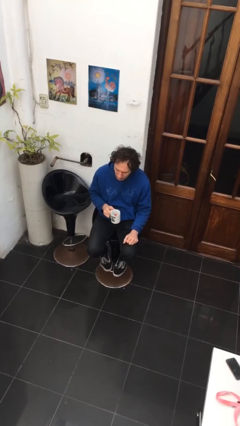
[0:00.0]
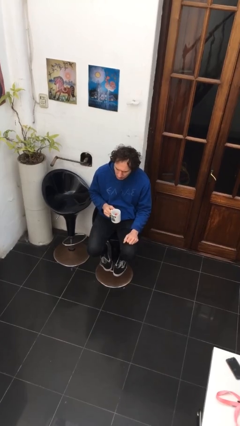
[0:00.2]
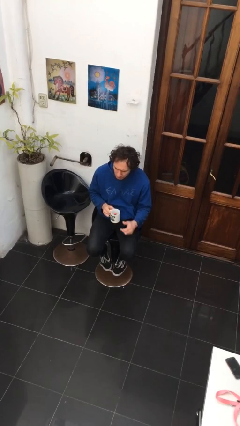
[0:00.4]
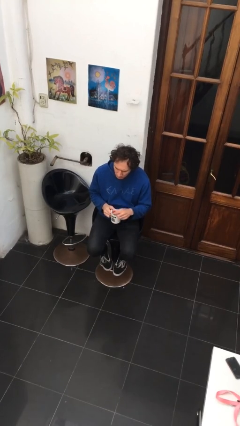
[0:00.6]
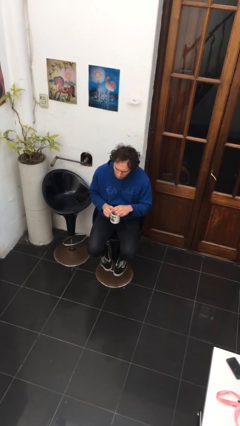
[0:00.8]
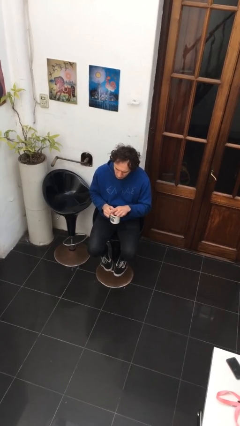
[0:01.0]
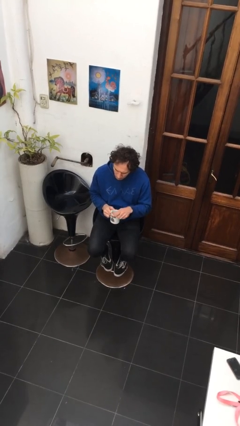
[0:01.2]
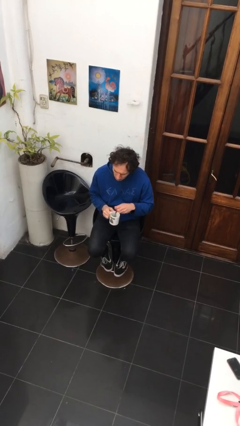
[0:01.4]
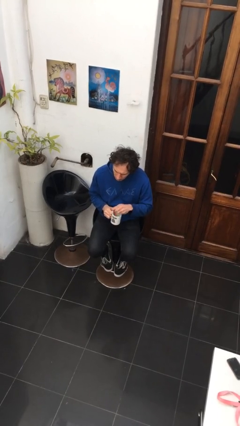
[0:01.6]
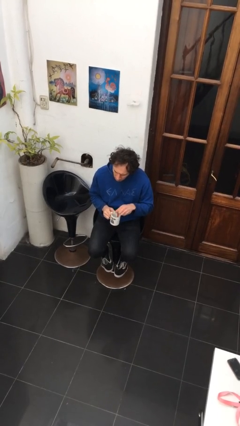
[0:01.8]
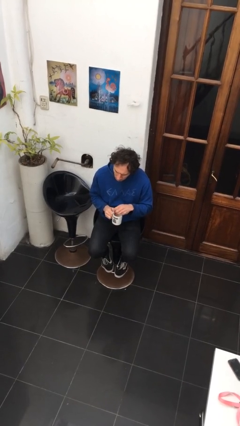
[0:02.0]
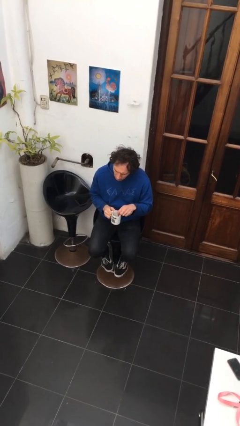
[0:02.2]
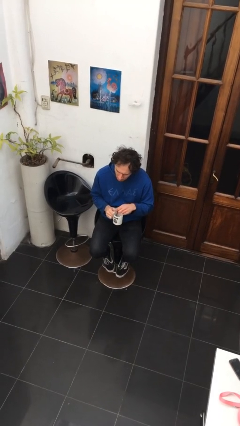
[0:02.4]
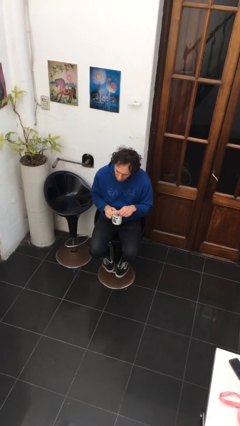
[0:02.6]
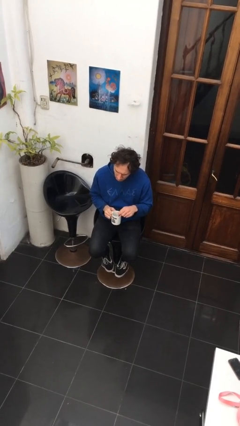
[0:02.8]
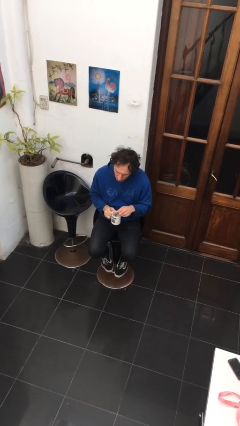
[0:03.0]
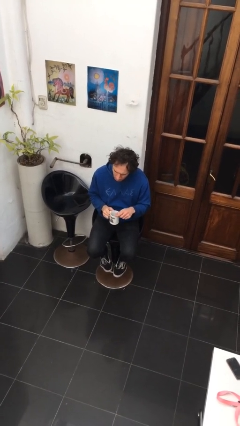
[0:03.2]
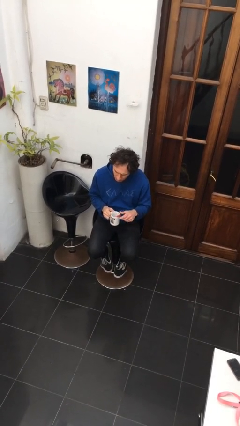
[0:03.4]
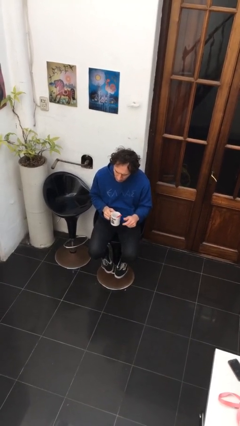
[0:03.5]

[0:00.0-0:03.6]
person stirs mug

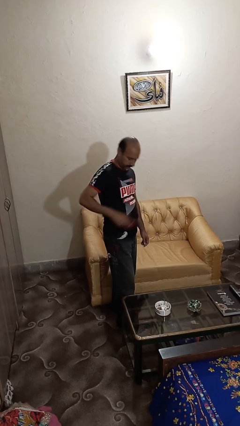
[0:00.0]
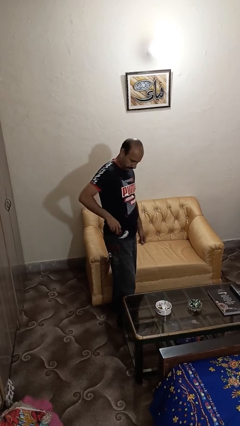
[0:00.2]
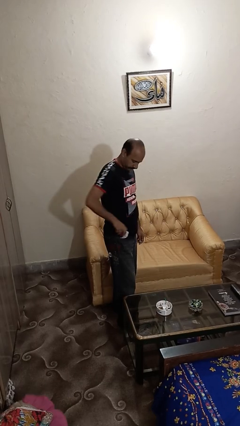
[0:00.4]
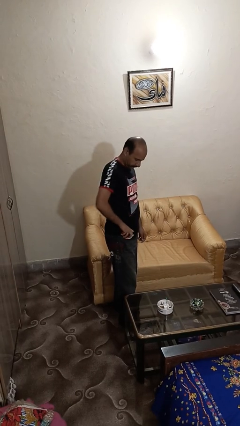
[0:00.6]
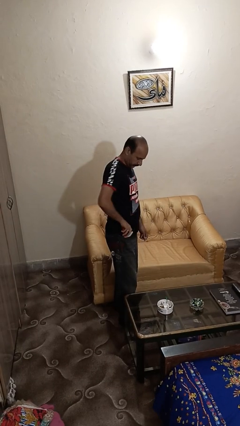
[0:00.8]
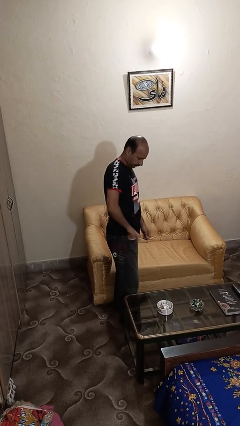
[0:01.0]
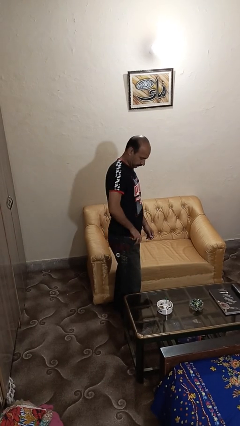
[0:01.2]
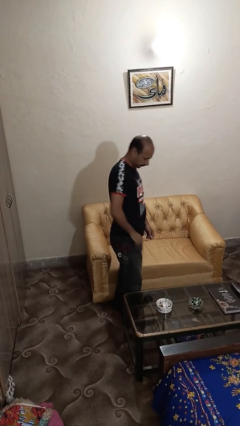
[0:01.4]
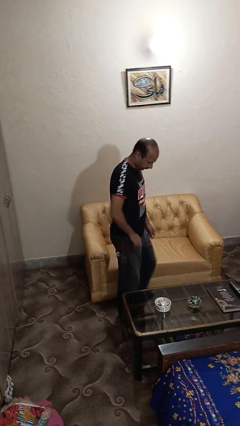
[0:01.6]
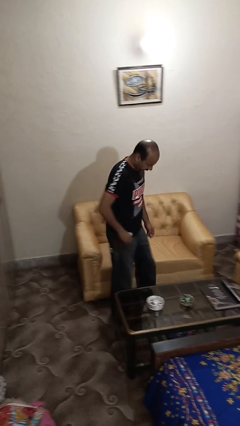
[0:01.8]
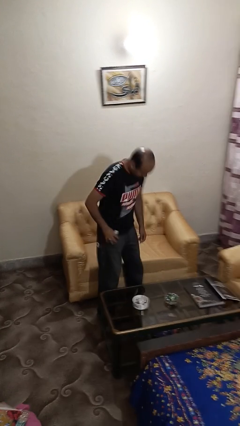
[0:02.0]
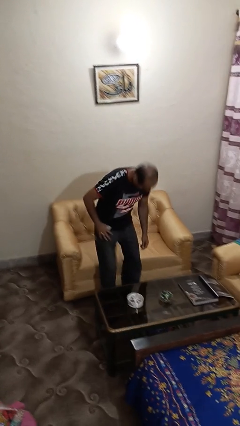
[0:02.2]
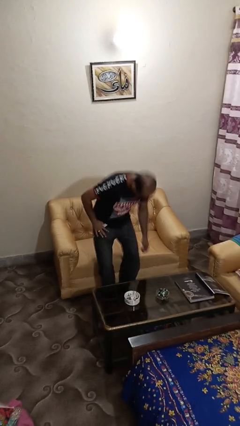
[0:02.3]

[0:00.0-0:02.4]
person puts phone into pocket

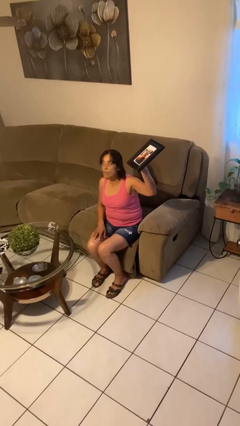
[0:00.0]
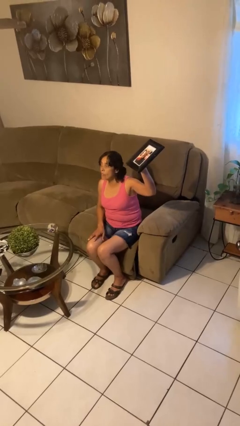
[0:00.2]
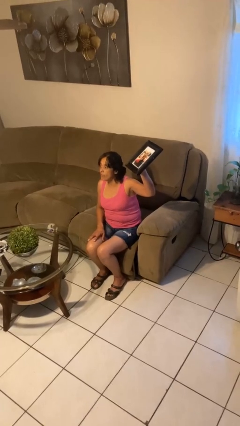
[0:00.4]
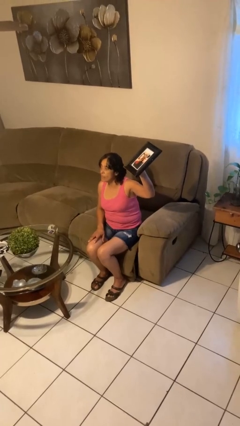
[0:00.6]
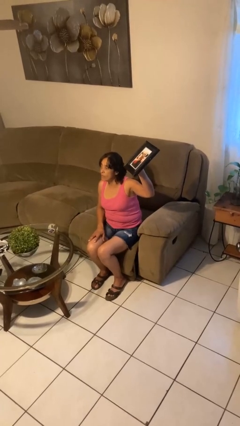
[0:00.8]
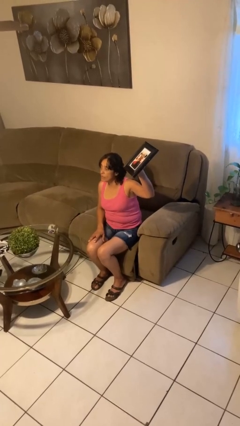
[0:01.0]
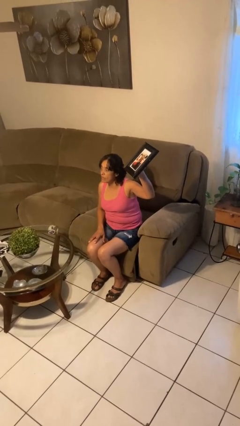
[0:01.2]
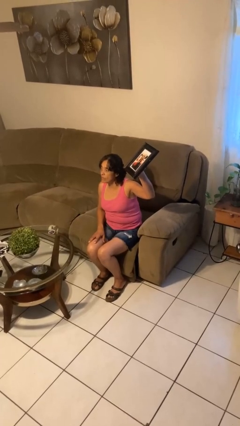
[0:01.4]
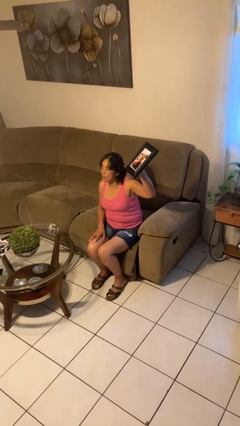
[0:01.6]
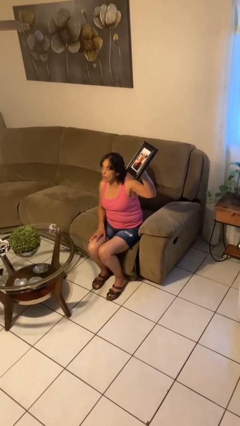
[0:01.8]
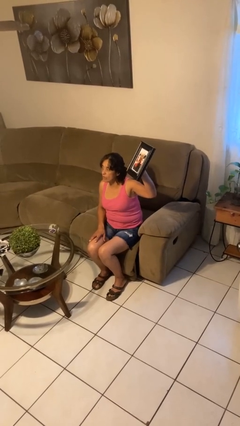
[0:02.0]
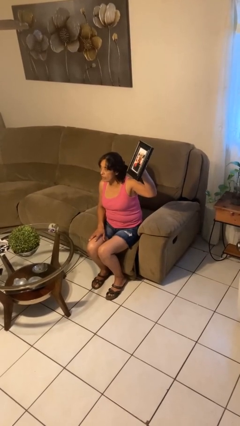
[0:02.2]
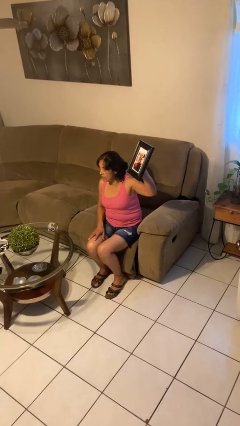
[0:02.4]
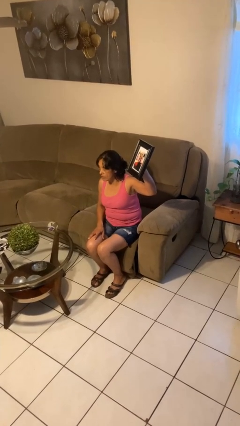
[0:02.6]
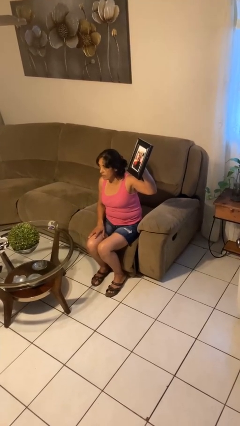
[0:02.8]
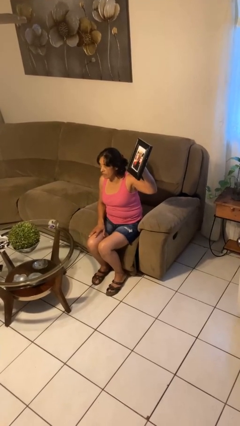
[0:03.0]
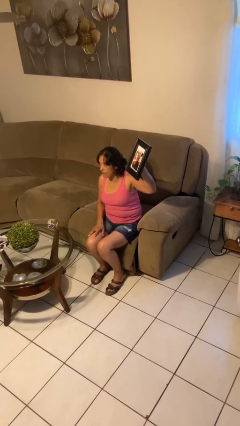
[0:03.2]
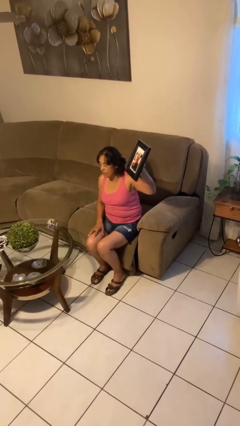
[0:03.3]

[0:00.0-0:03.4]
person holds object above head

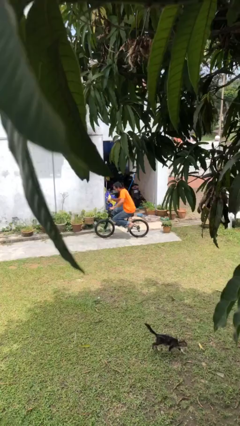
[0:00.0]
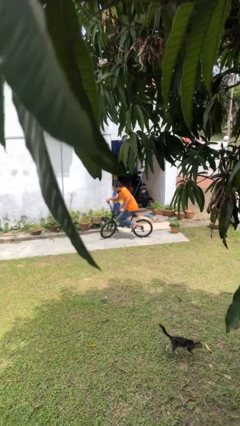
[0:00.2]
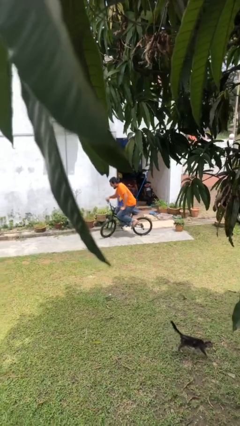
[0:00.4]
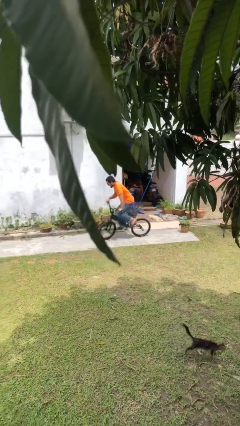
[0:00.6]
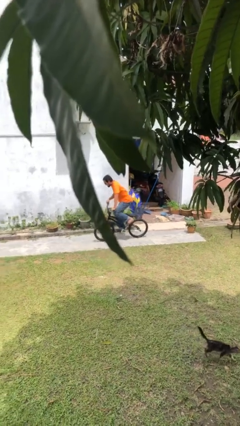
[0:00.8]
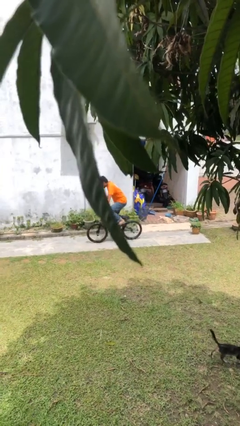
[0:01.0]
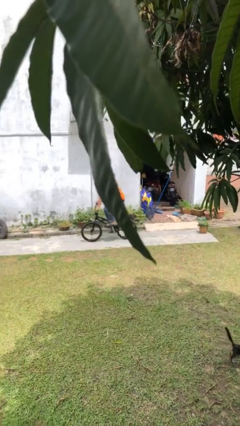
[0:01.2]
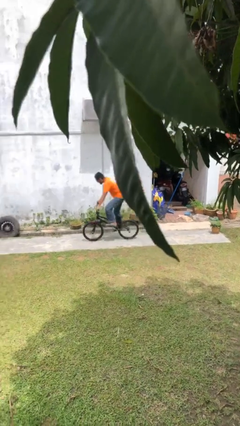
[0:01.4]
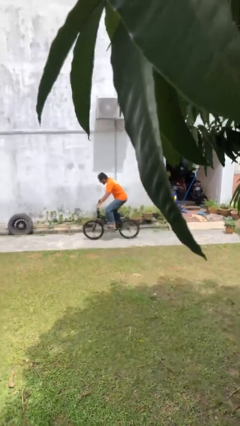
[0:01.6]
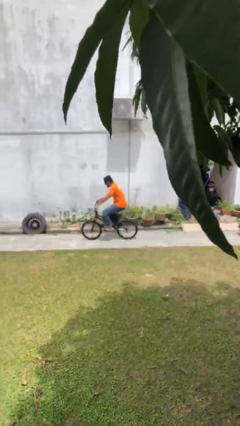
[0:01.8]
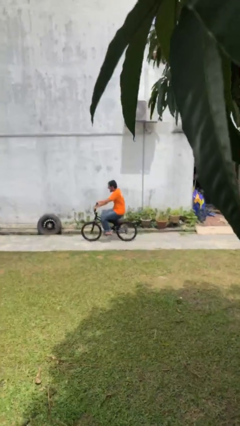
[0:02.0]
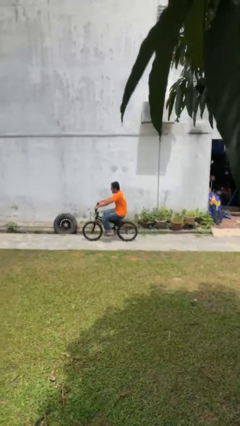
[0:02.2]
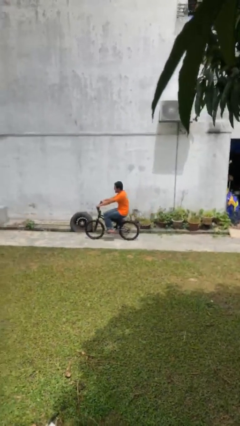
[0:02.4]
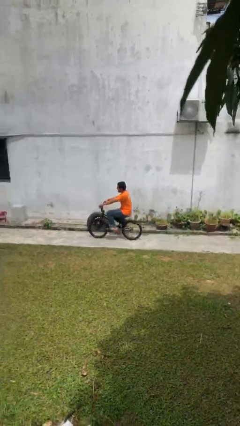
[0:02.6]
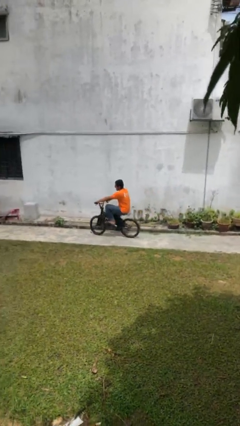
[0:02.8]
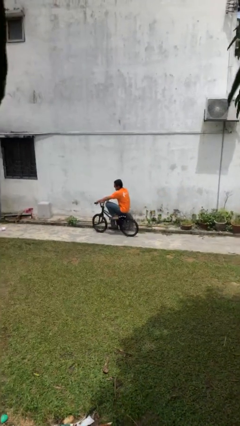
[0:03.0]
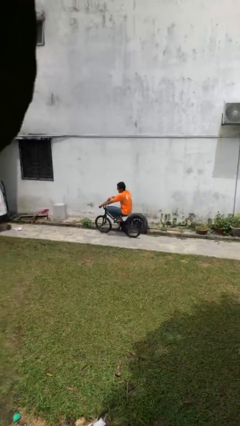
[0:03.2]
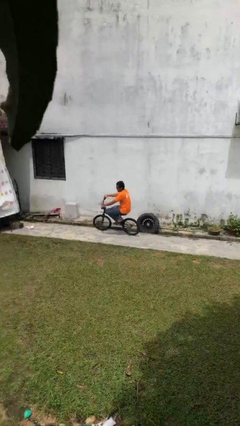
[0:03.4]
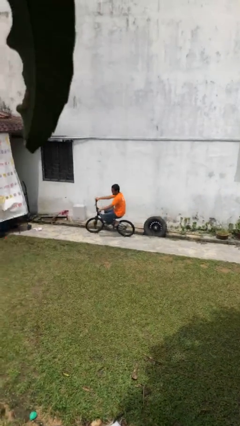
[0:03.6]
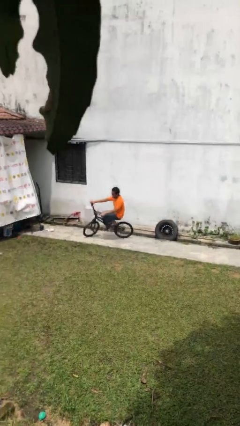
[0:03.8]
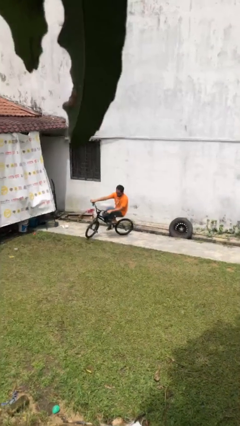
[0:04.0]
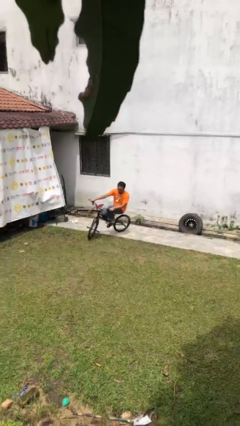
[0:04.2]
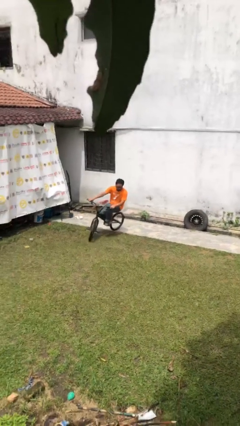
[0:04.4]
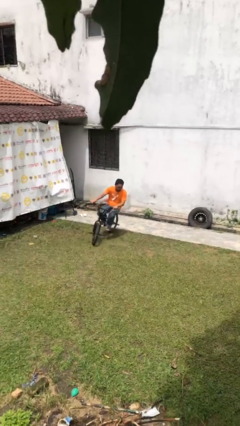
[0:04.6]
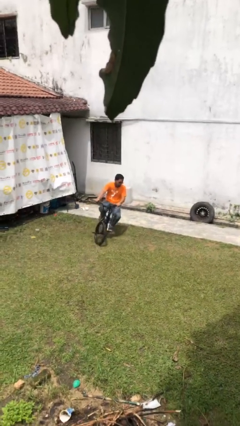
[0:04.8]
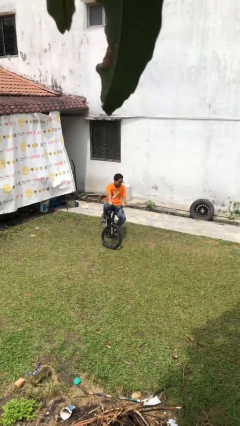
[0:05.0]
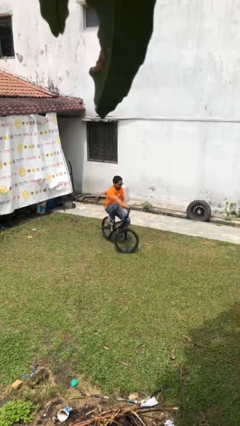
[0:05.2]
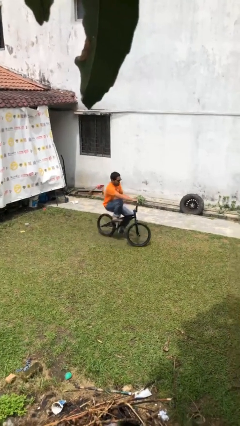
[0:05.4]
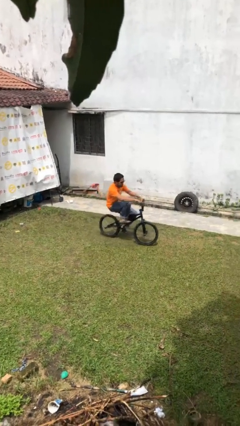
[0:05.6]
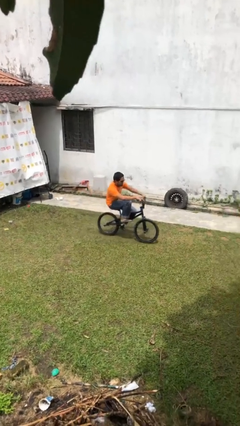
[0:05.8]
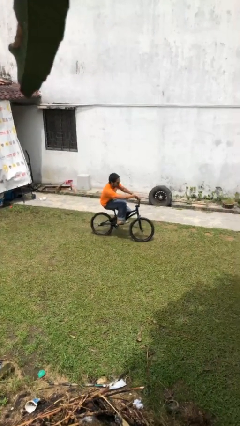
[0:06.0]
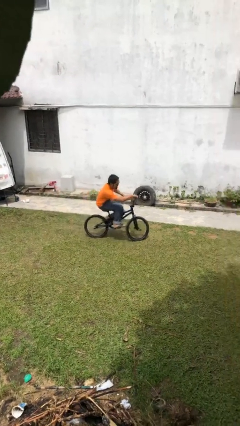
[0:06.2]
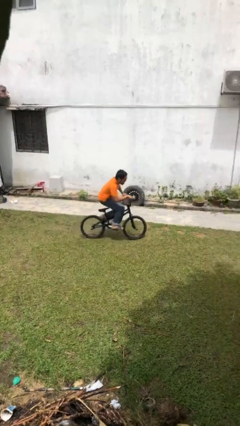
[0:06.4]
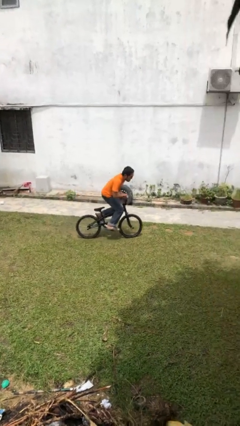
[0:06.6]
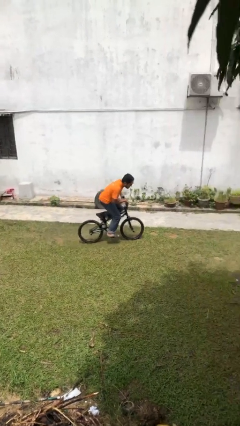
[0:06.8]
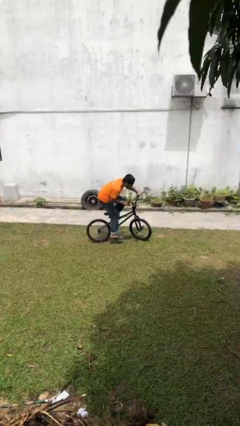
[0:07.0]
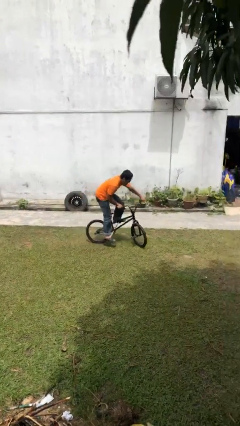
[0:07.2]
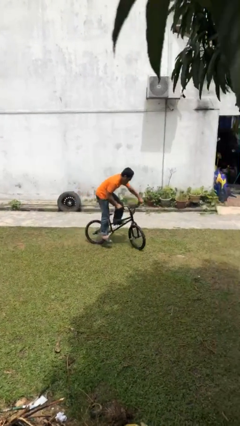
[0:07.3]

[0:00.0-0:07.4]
person rides bicycle

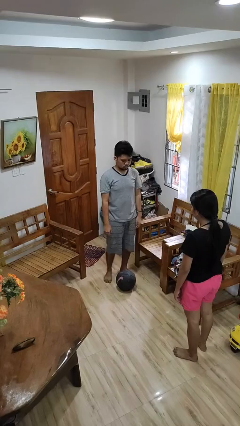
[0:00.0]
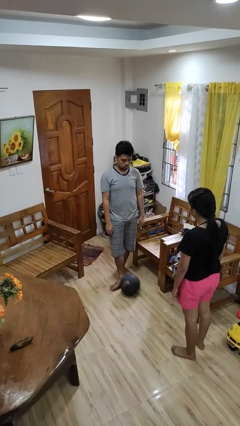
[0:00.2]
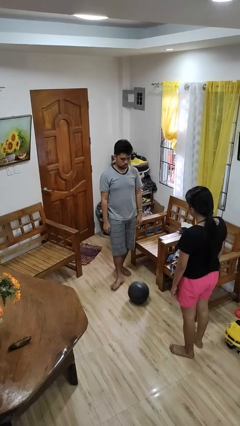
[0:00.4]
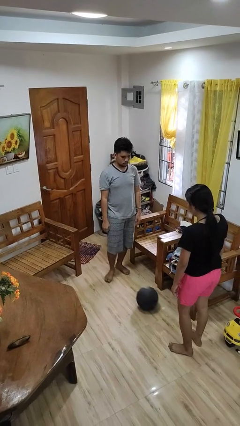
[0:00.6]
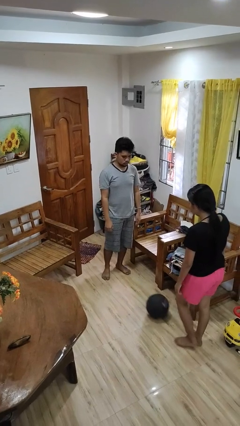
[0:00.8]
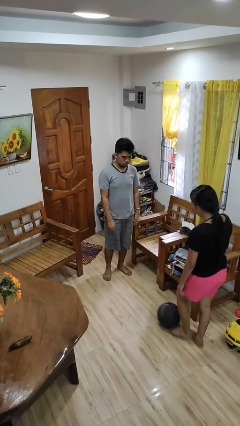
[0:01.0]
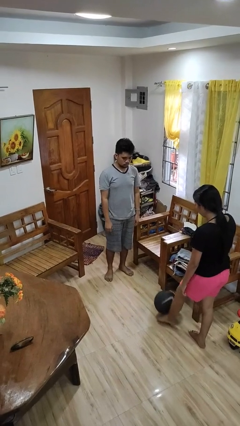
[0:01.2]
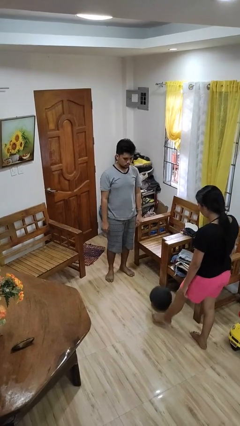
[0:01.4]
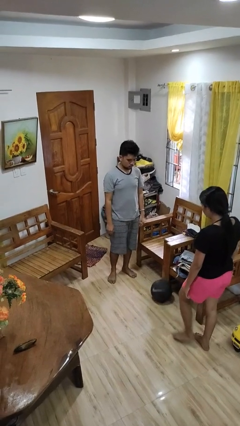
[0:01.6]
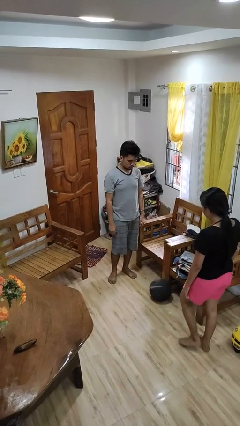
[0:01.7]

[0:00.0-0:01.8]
person kicks object to person
